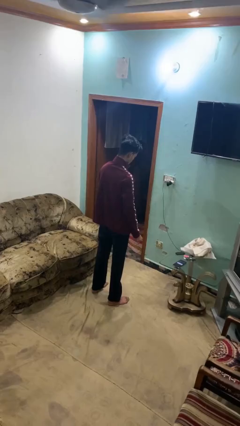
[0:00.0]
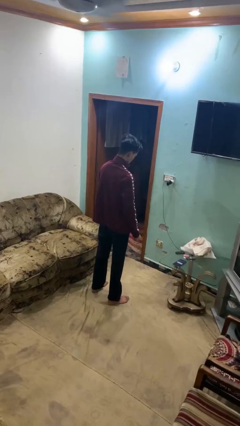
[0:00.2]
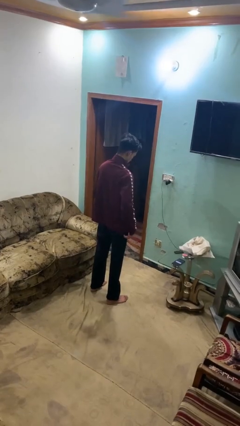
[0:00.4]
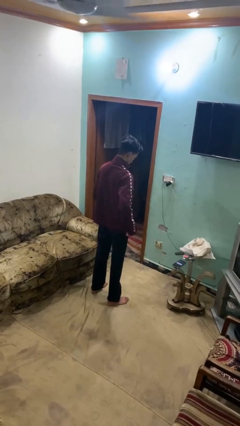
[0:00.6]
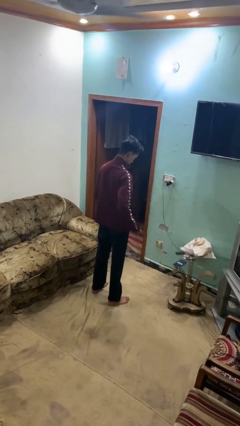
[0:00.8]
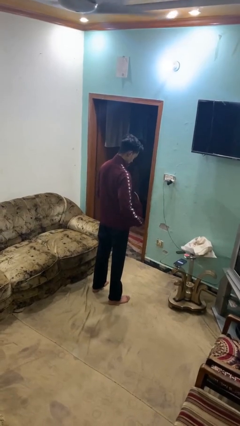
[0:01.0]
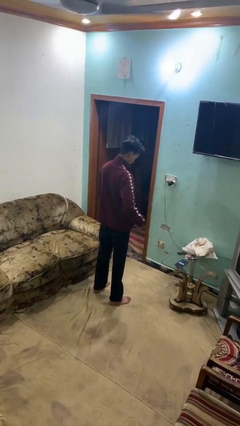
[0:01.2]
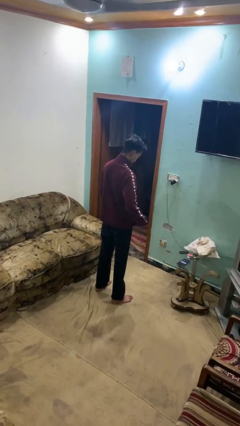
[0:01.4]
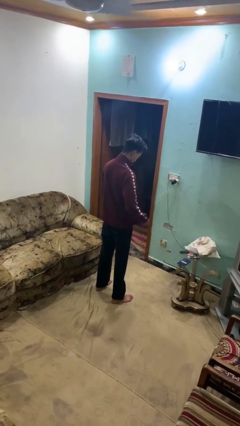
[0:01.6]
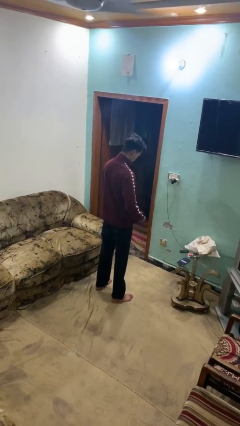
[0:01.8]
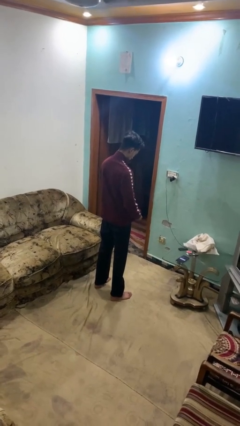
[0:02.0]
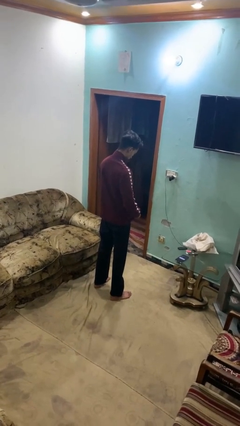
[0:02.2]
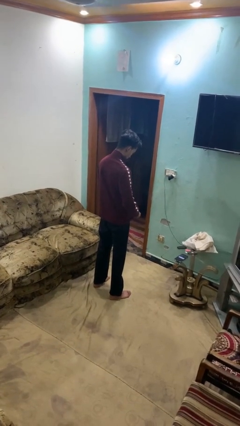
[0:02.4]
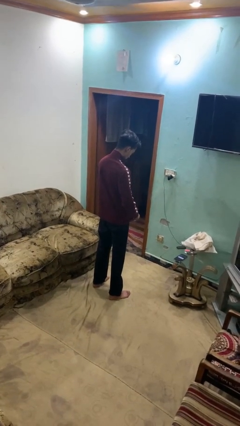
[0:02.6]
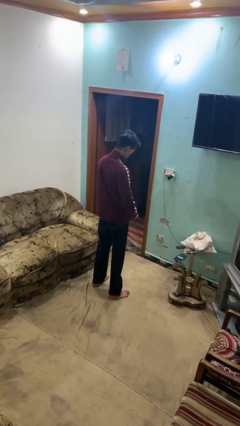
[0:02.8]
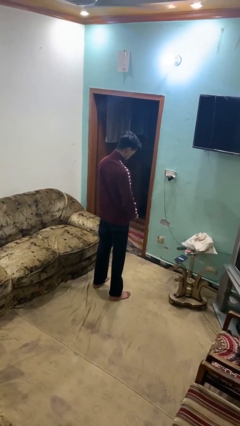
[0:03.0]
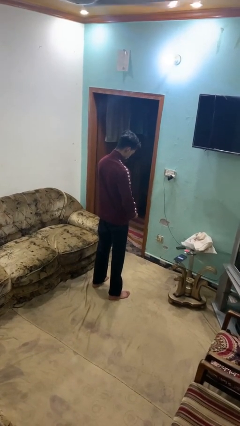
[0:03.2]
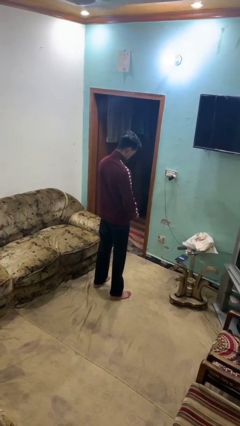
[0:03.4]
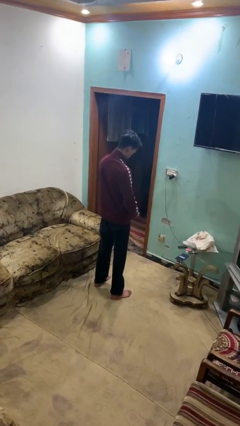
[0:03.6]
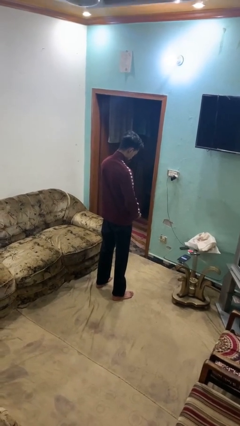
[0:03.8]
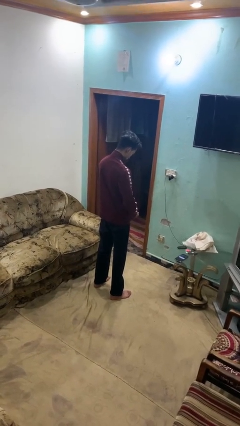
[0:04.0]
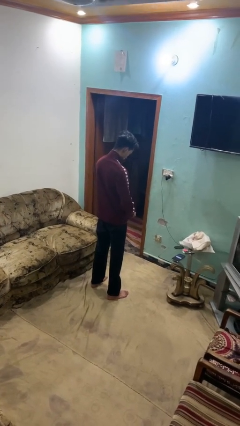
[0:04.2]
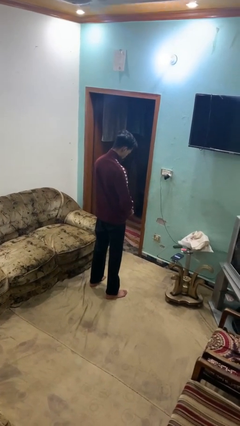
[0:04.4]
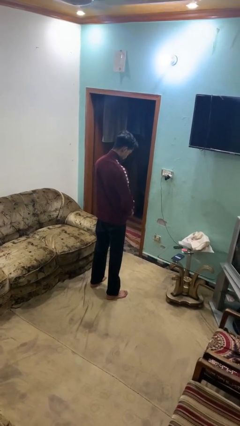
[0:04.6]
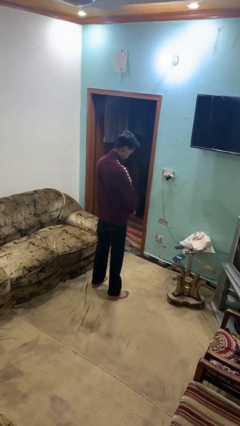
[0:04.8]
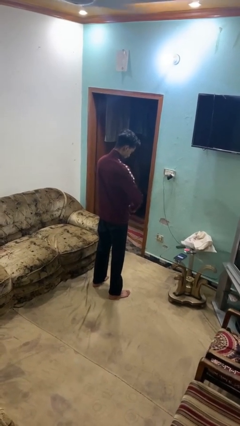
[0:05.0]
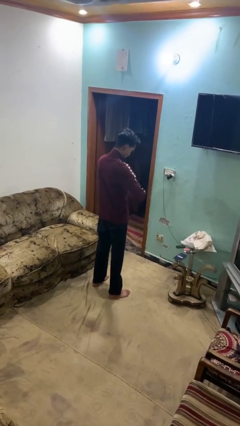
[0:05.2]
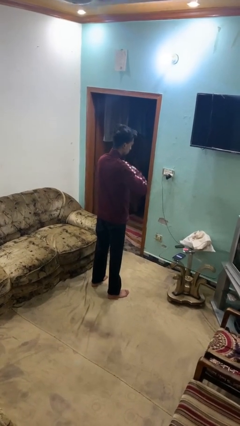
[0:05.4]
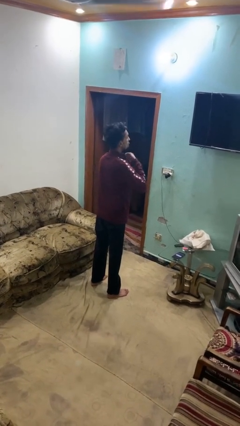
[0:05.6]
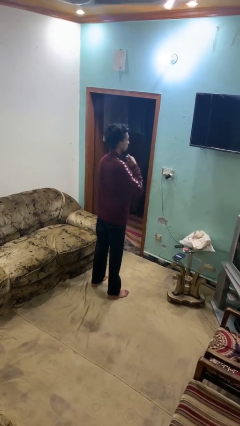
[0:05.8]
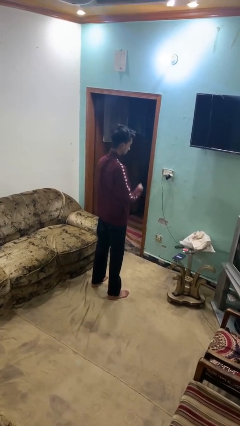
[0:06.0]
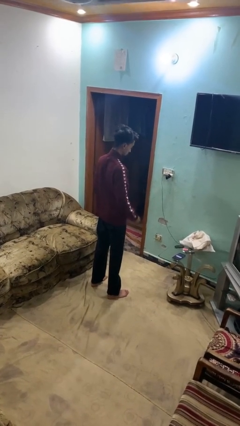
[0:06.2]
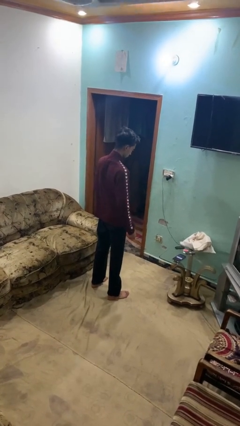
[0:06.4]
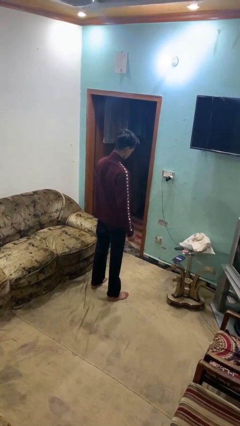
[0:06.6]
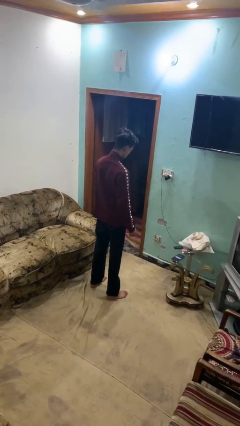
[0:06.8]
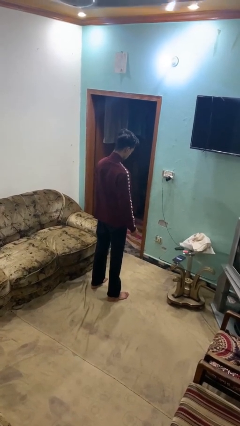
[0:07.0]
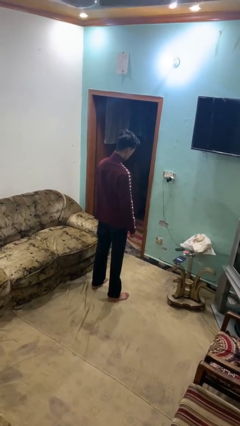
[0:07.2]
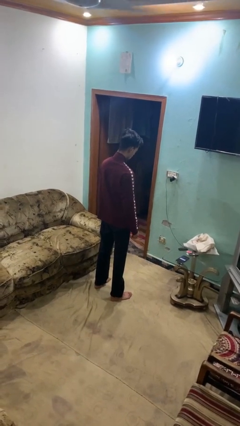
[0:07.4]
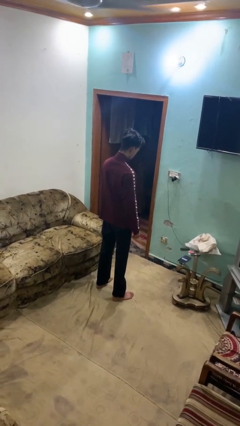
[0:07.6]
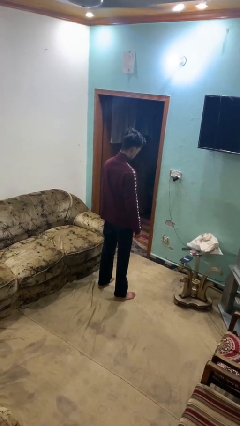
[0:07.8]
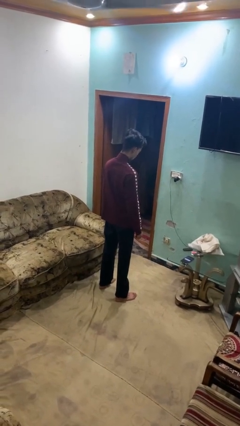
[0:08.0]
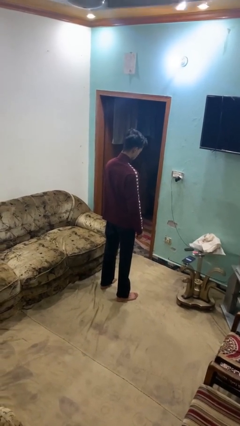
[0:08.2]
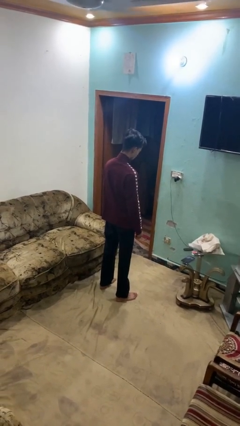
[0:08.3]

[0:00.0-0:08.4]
person zips up jacket

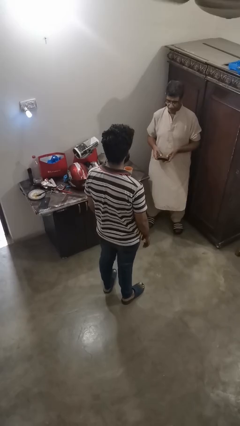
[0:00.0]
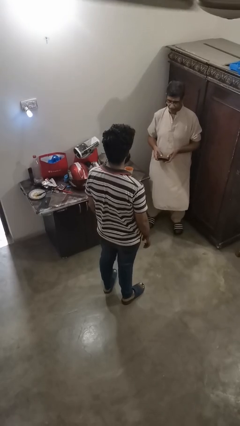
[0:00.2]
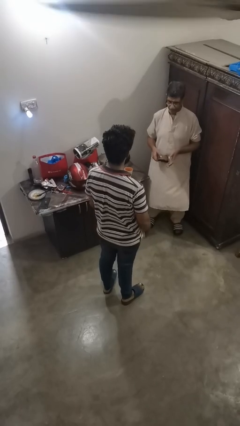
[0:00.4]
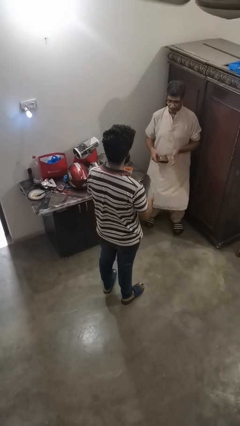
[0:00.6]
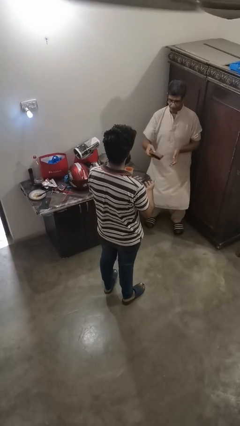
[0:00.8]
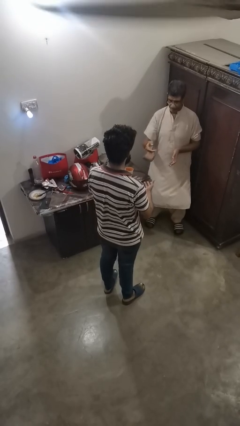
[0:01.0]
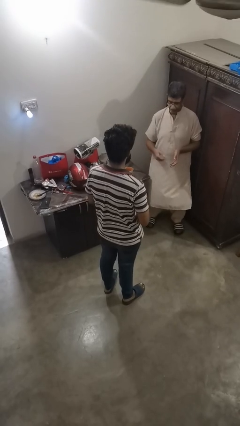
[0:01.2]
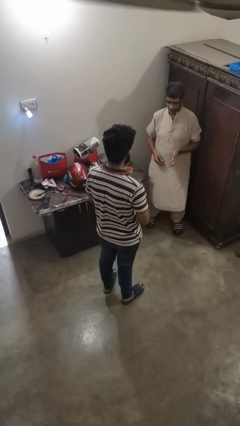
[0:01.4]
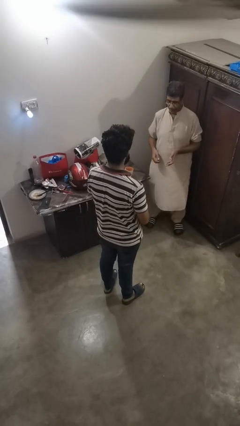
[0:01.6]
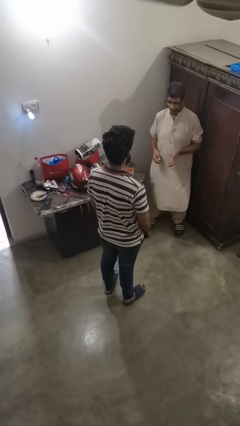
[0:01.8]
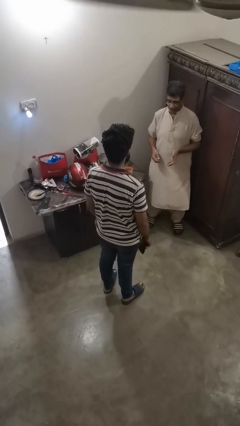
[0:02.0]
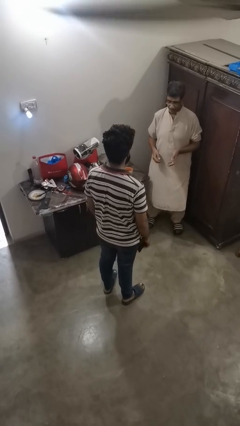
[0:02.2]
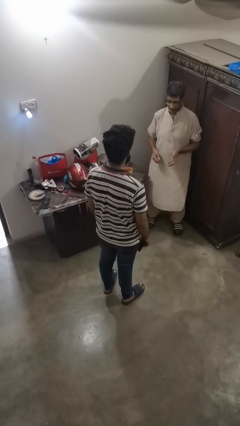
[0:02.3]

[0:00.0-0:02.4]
person catches object from person

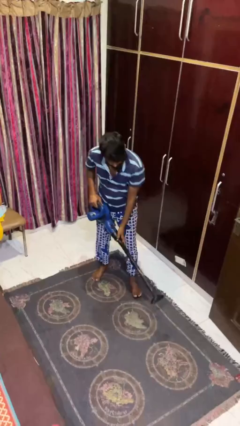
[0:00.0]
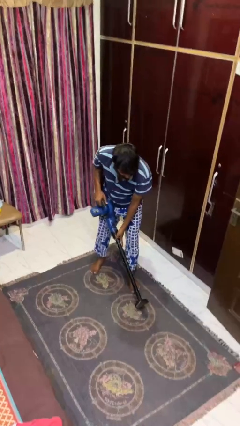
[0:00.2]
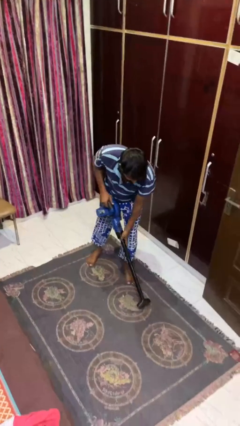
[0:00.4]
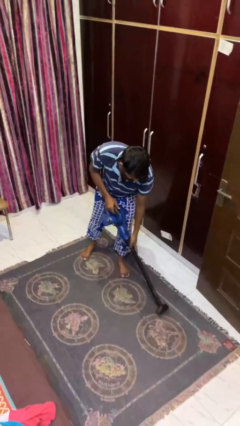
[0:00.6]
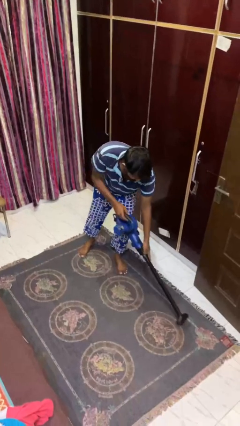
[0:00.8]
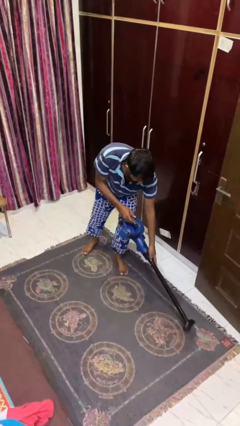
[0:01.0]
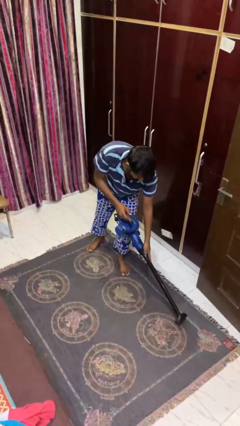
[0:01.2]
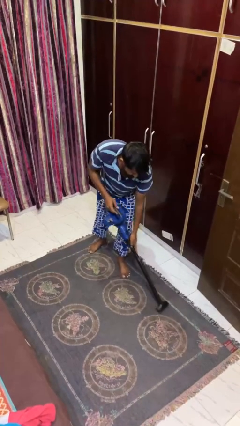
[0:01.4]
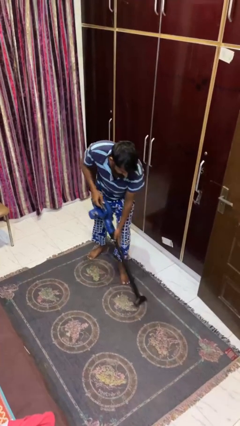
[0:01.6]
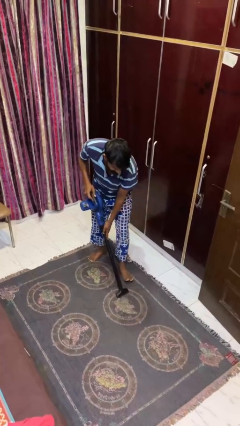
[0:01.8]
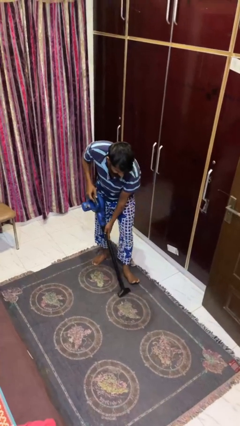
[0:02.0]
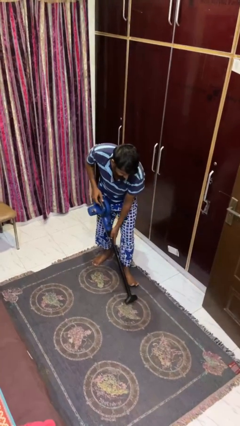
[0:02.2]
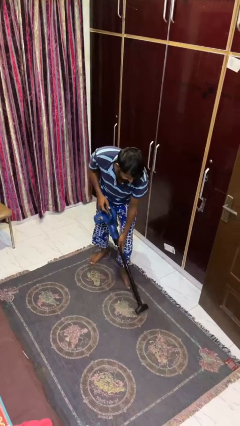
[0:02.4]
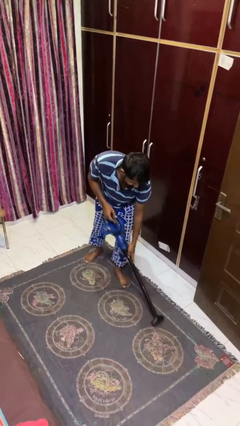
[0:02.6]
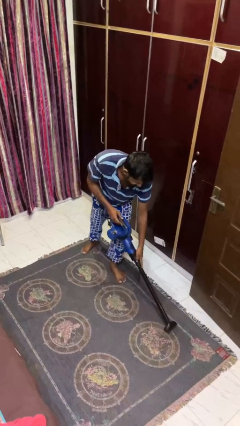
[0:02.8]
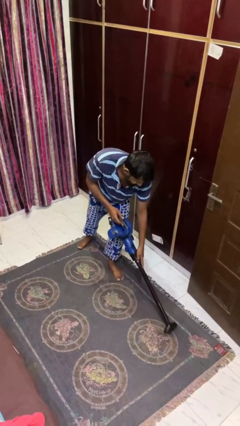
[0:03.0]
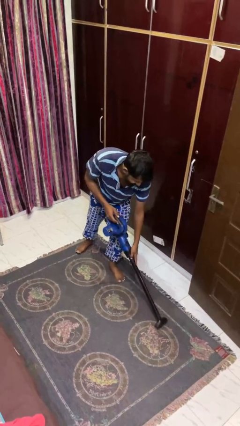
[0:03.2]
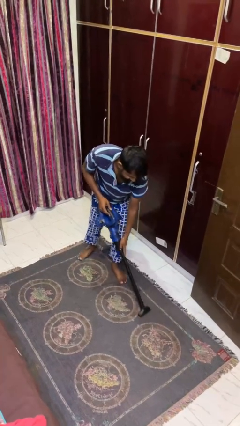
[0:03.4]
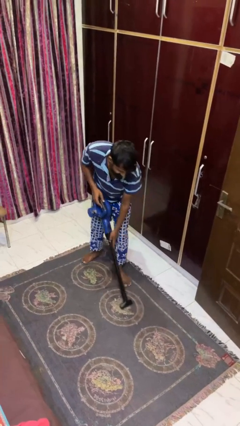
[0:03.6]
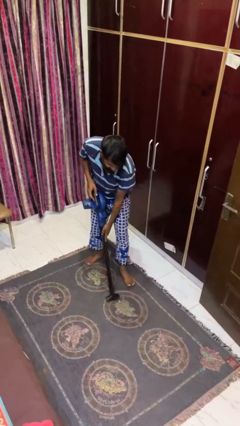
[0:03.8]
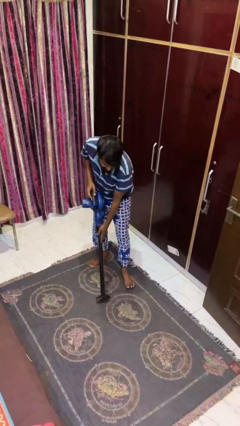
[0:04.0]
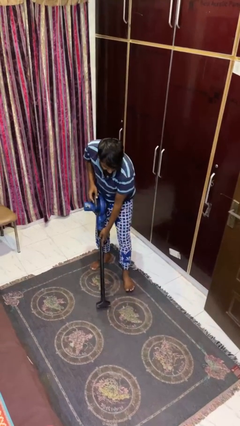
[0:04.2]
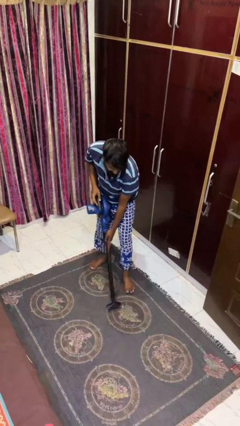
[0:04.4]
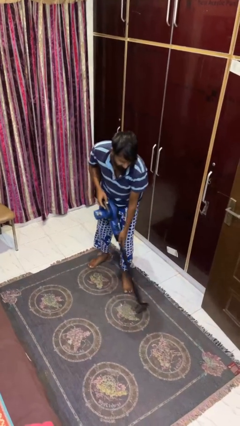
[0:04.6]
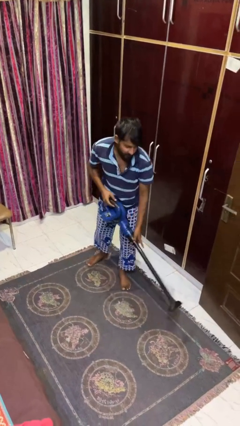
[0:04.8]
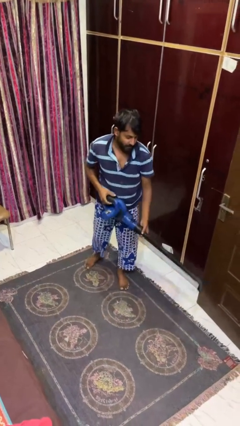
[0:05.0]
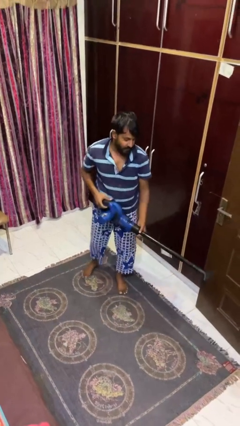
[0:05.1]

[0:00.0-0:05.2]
person vacuums carpet

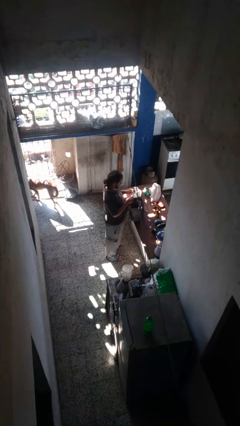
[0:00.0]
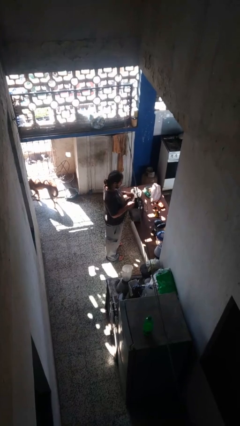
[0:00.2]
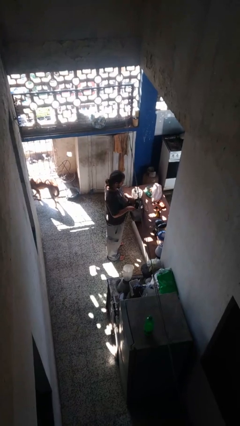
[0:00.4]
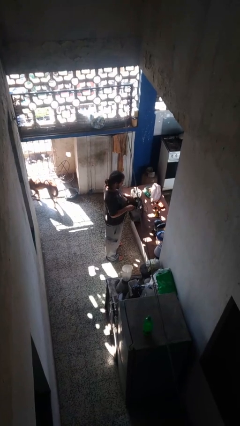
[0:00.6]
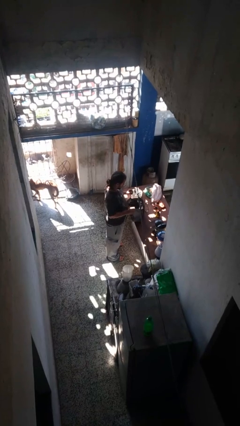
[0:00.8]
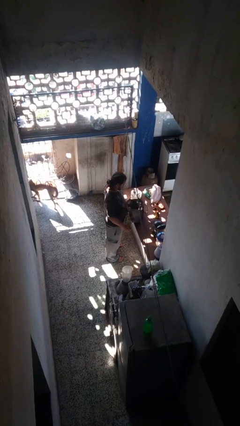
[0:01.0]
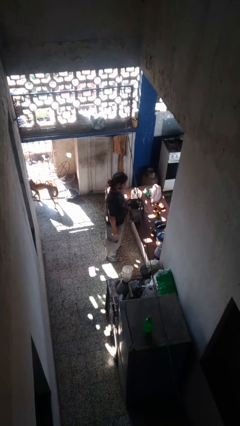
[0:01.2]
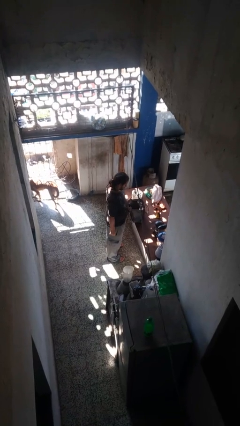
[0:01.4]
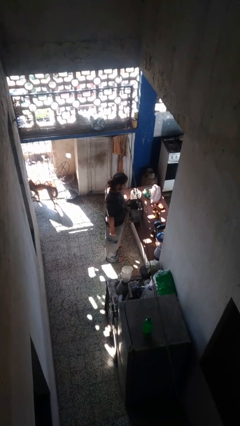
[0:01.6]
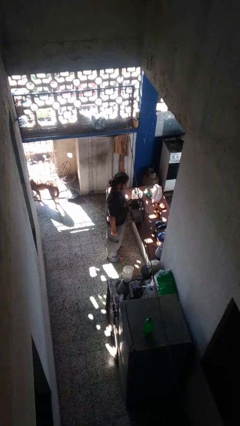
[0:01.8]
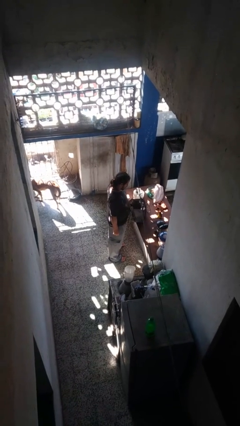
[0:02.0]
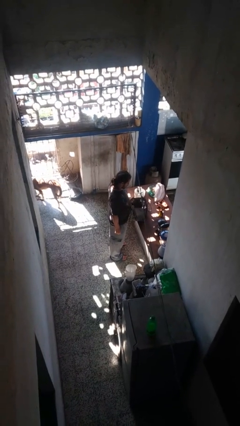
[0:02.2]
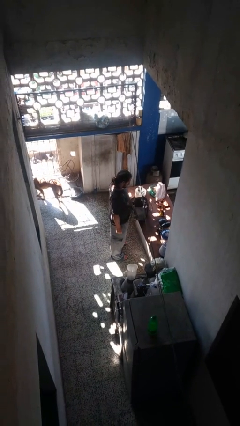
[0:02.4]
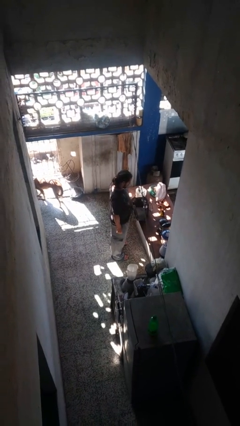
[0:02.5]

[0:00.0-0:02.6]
person puts object into purse
